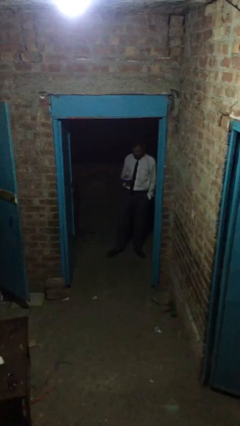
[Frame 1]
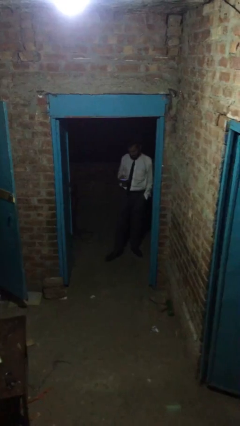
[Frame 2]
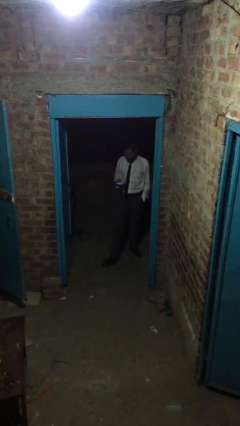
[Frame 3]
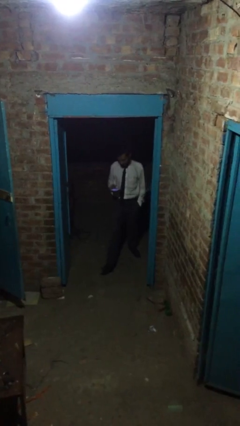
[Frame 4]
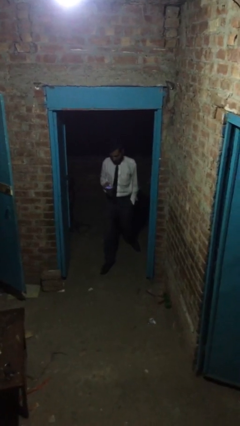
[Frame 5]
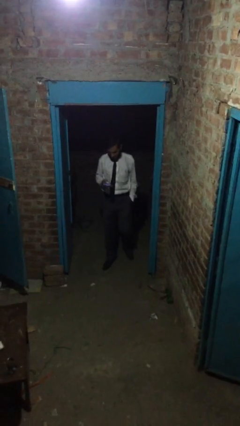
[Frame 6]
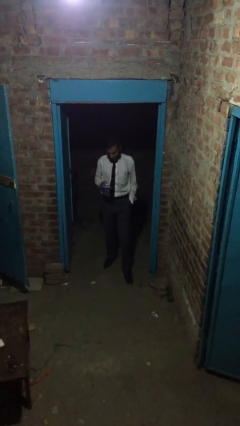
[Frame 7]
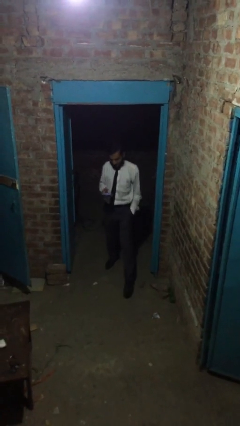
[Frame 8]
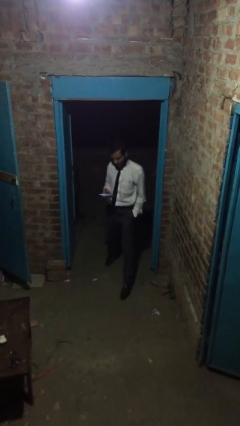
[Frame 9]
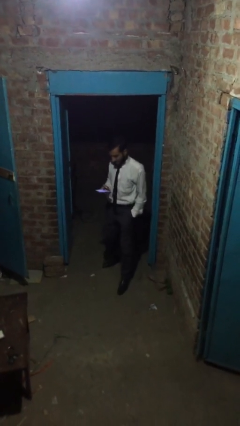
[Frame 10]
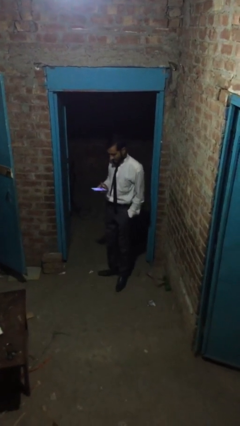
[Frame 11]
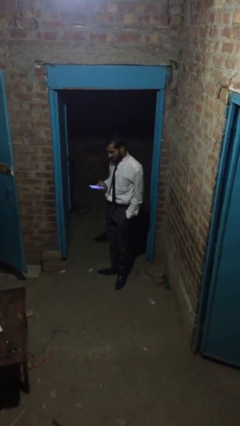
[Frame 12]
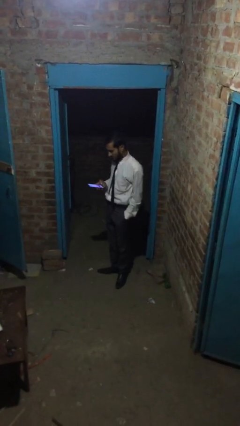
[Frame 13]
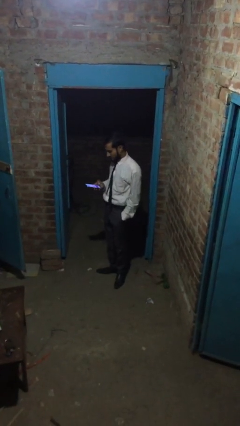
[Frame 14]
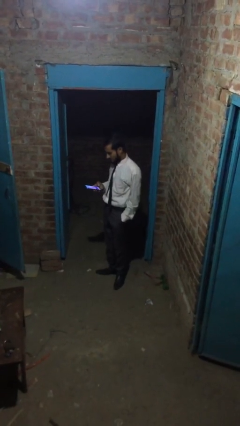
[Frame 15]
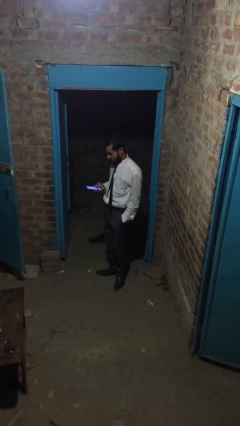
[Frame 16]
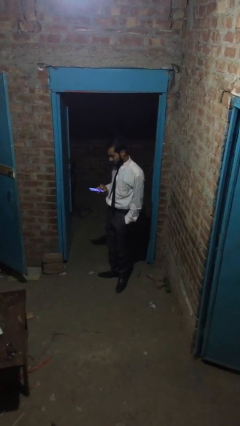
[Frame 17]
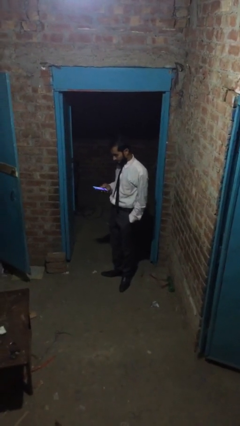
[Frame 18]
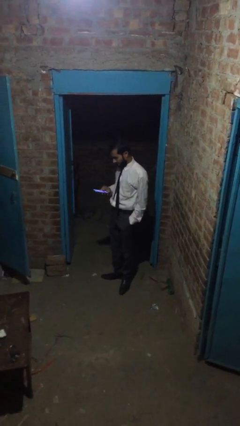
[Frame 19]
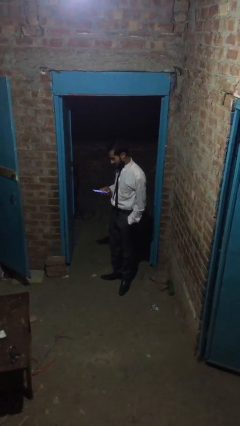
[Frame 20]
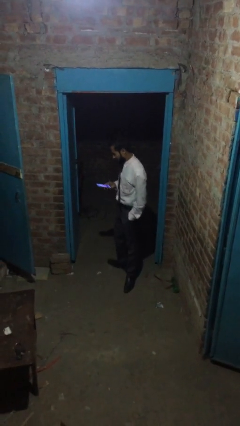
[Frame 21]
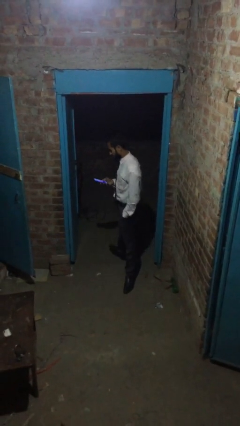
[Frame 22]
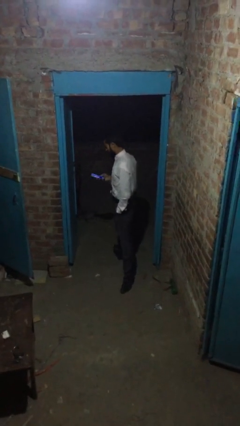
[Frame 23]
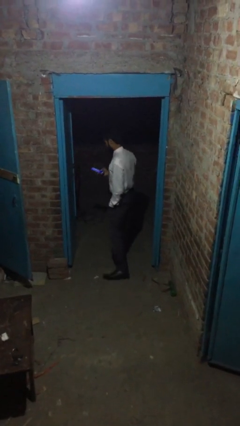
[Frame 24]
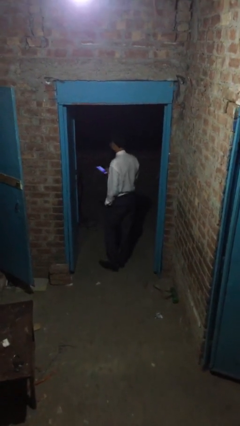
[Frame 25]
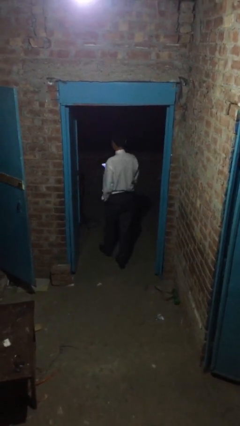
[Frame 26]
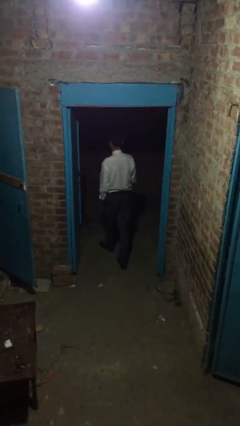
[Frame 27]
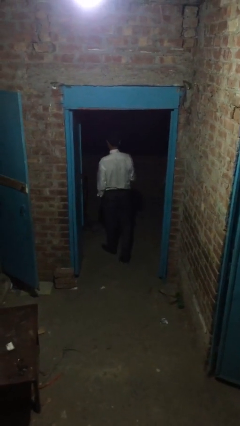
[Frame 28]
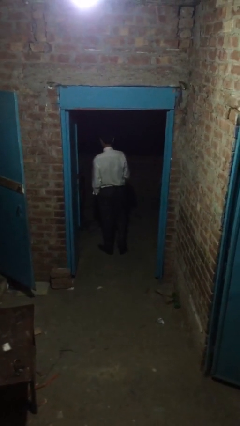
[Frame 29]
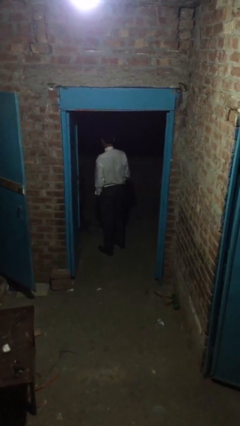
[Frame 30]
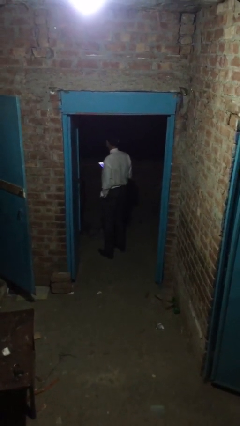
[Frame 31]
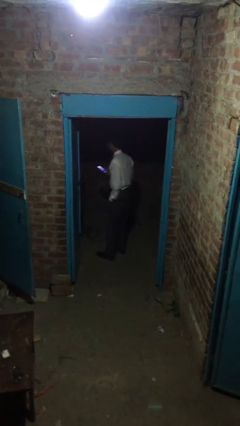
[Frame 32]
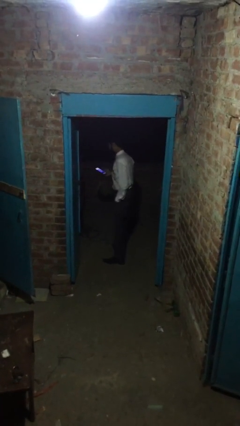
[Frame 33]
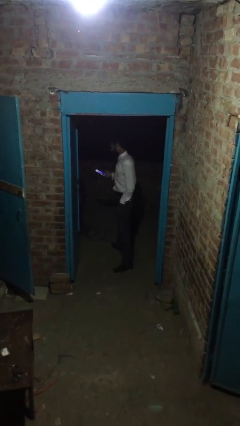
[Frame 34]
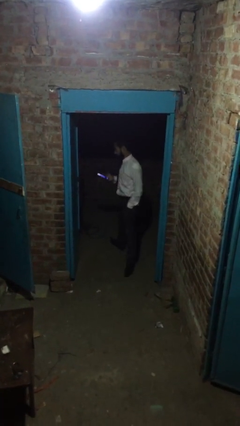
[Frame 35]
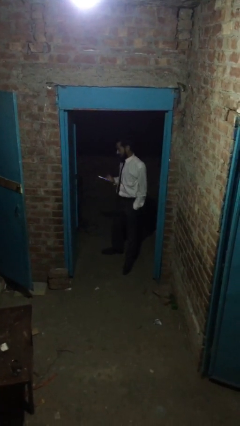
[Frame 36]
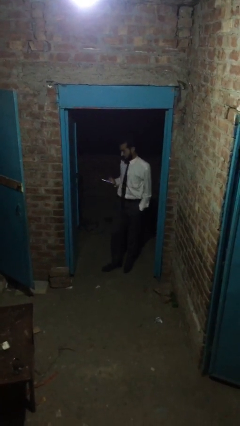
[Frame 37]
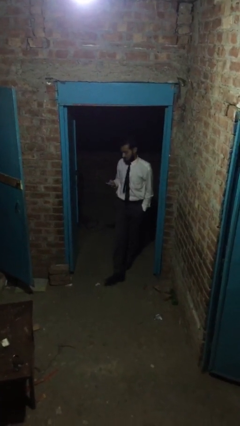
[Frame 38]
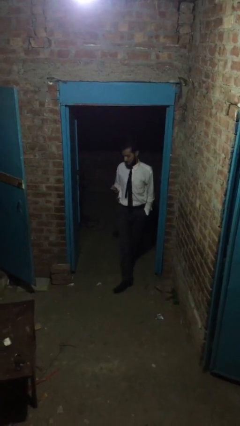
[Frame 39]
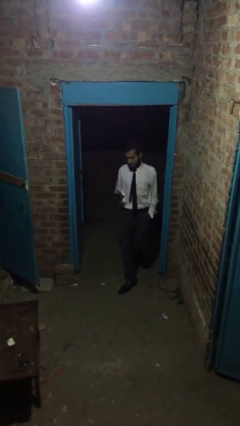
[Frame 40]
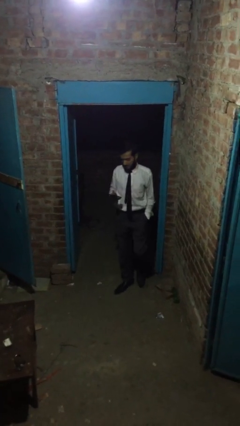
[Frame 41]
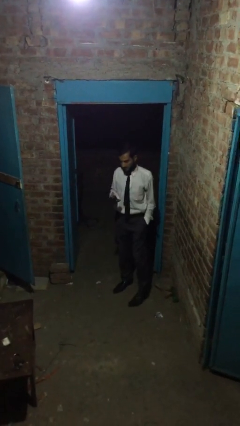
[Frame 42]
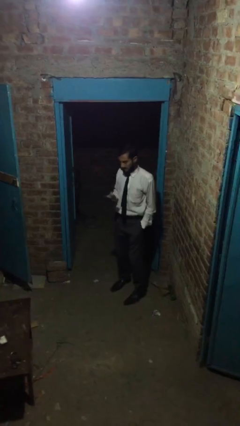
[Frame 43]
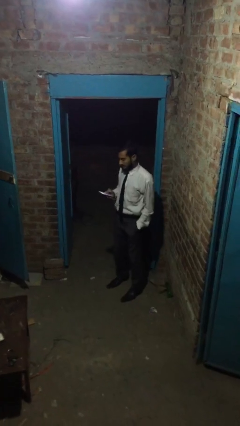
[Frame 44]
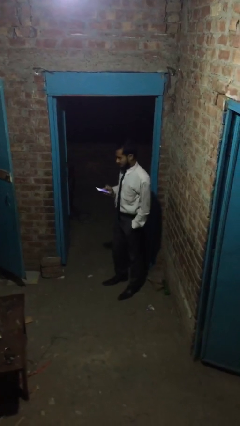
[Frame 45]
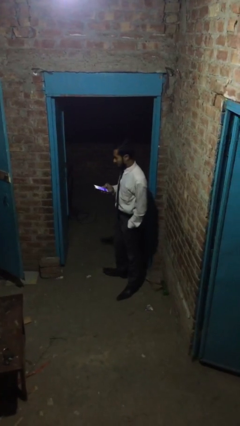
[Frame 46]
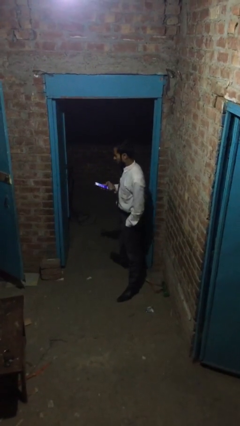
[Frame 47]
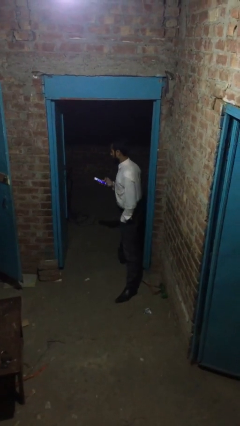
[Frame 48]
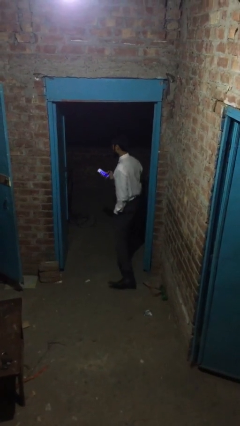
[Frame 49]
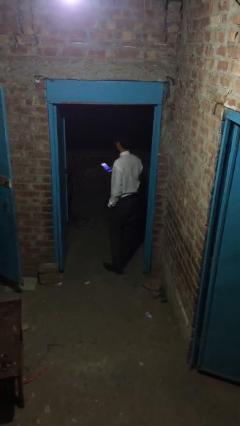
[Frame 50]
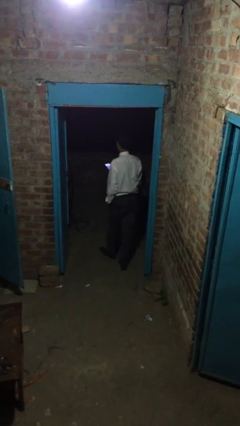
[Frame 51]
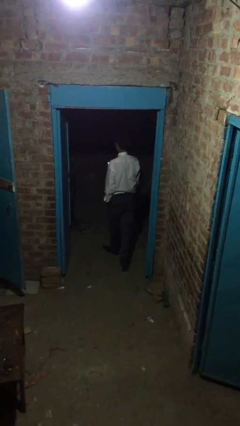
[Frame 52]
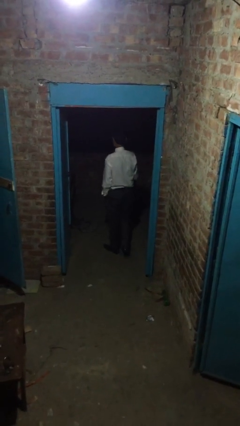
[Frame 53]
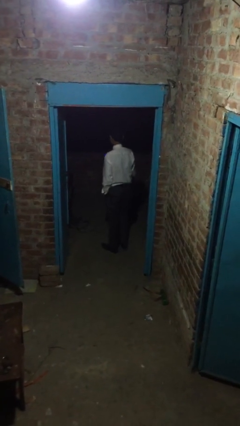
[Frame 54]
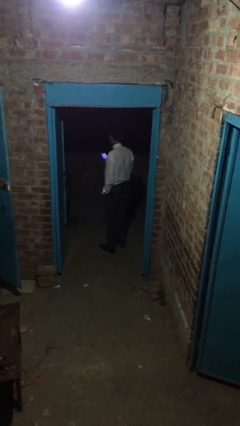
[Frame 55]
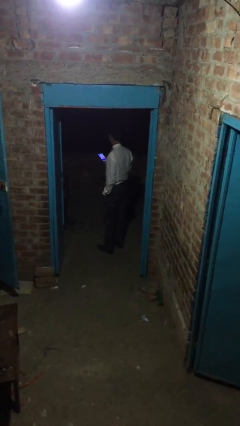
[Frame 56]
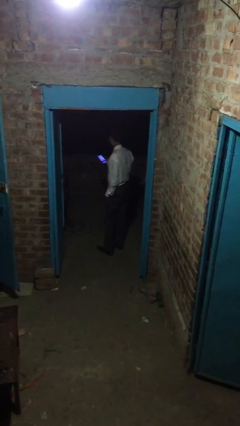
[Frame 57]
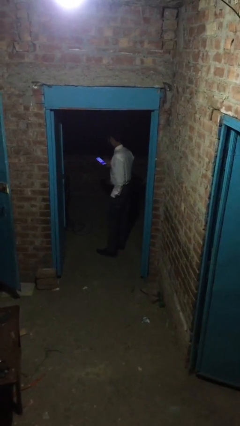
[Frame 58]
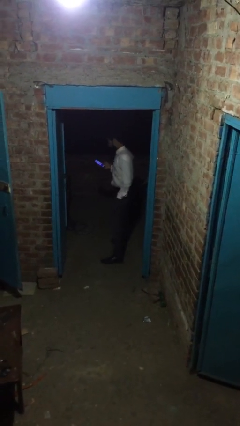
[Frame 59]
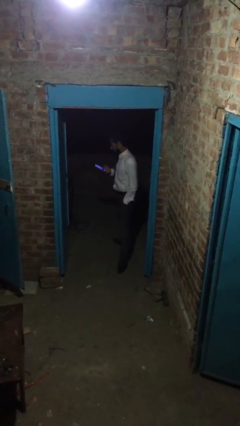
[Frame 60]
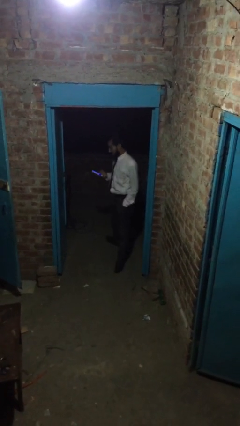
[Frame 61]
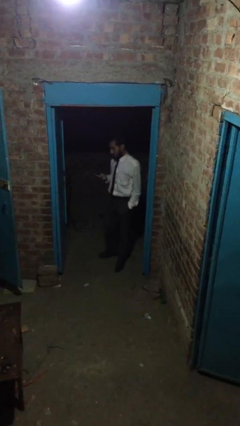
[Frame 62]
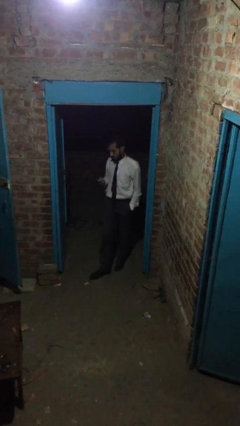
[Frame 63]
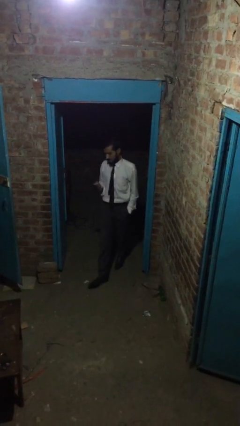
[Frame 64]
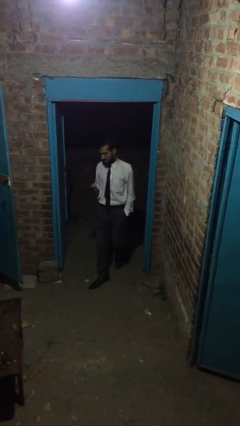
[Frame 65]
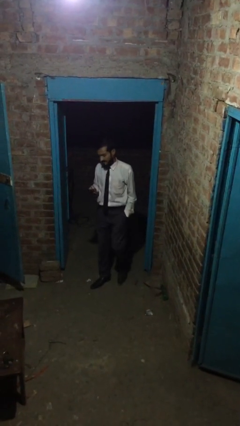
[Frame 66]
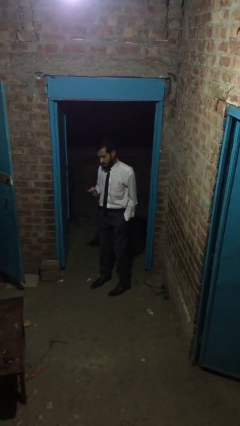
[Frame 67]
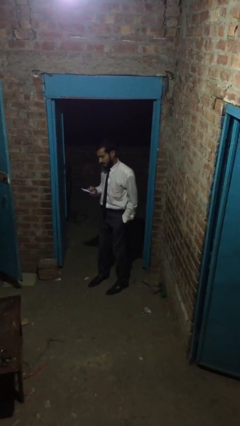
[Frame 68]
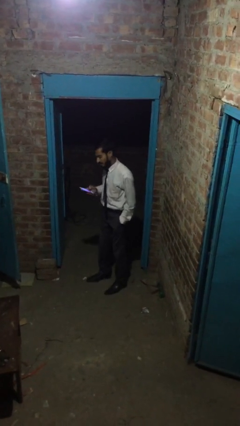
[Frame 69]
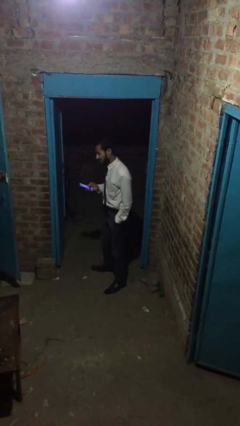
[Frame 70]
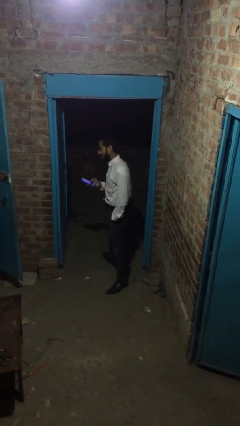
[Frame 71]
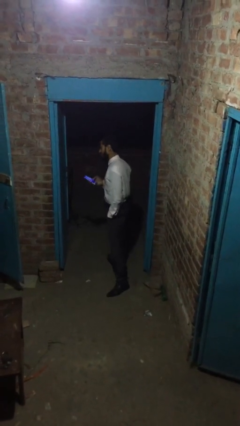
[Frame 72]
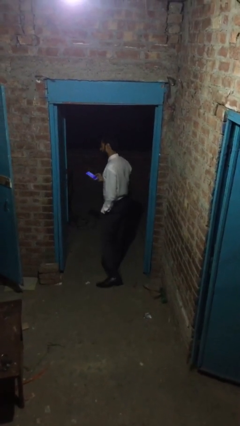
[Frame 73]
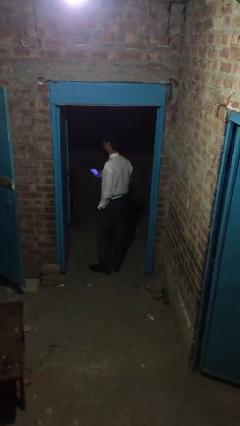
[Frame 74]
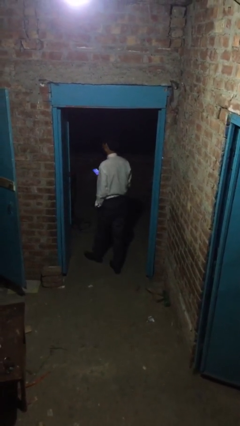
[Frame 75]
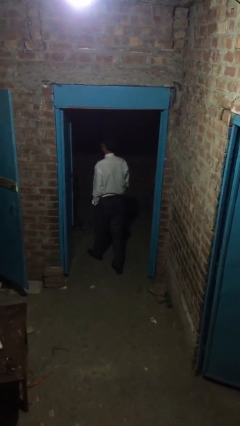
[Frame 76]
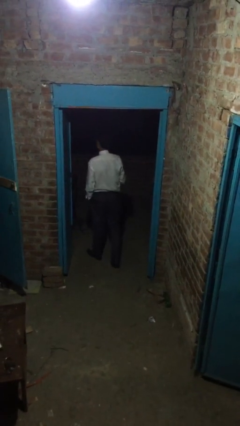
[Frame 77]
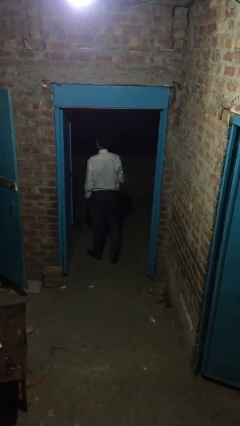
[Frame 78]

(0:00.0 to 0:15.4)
person texts on phone

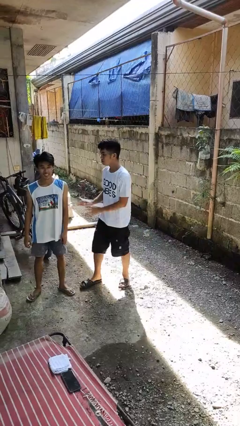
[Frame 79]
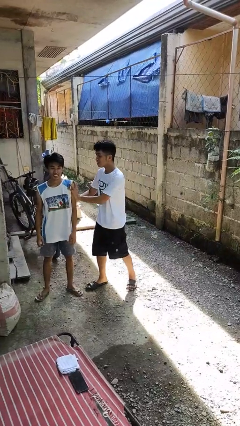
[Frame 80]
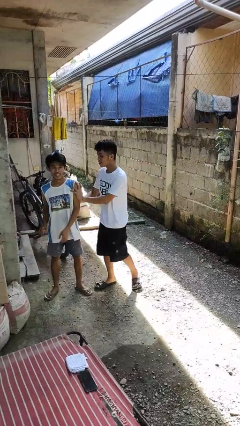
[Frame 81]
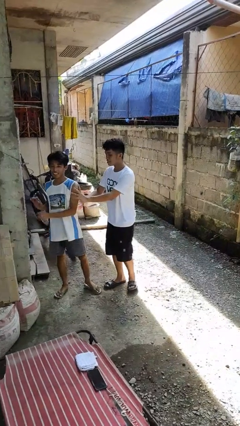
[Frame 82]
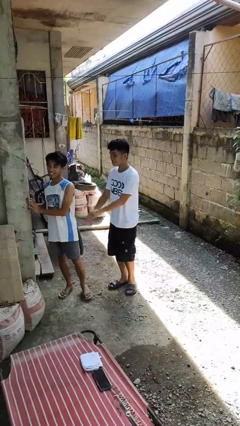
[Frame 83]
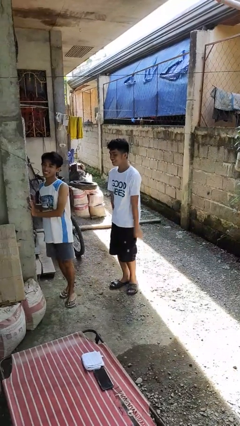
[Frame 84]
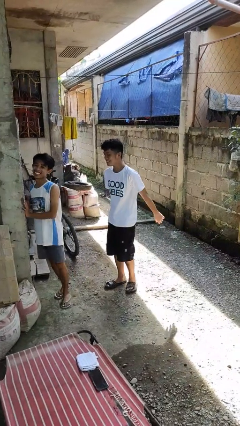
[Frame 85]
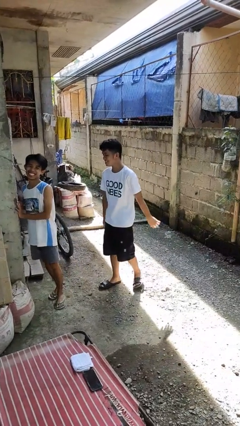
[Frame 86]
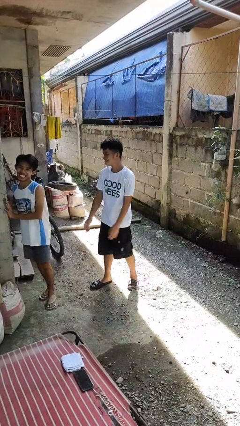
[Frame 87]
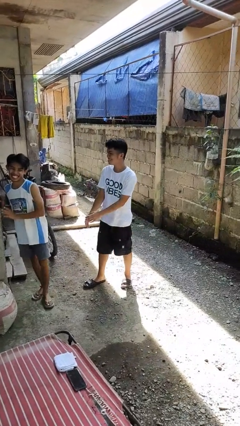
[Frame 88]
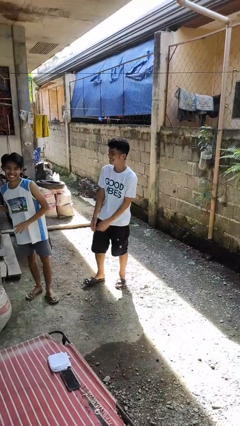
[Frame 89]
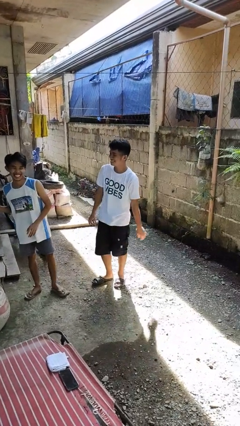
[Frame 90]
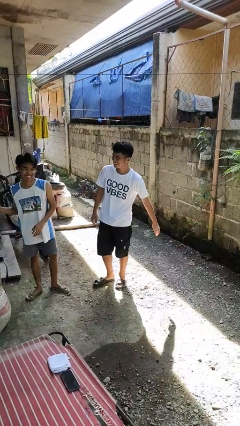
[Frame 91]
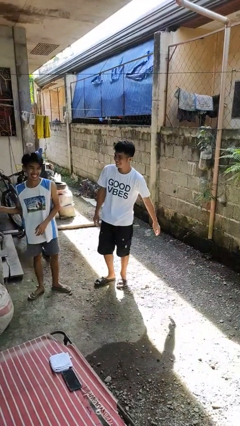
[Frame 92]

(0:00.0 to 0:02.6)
person shoves person
